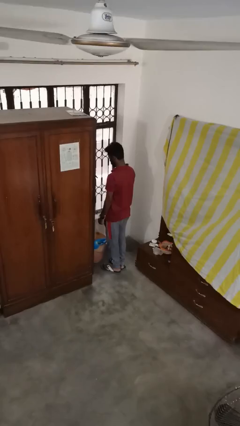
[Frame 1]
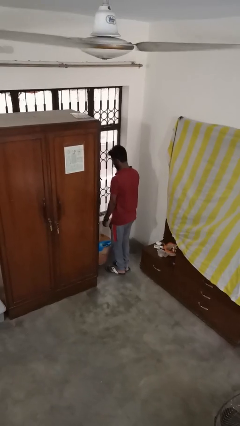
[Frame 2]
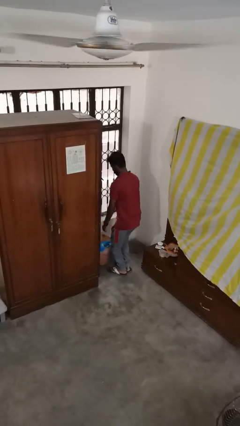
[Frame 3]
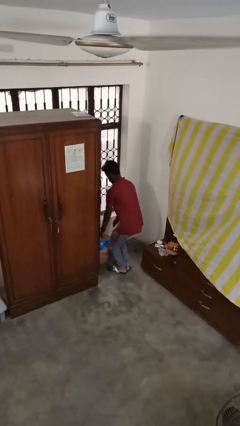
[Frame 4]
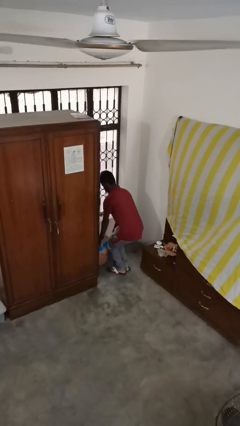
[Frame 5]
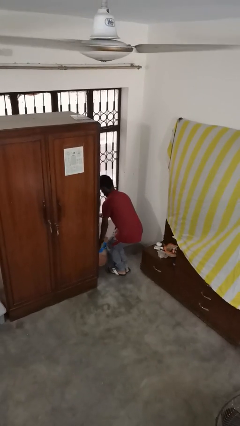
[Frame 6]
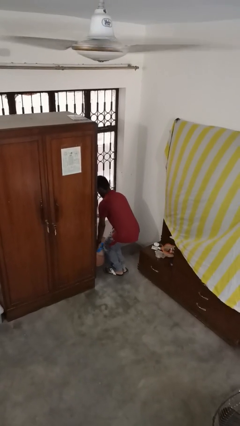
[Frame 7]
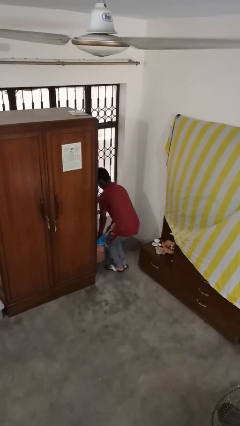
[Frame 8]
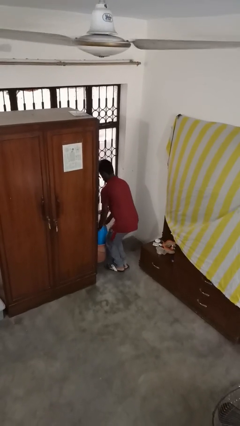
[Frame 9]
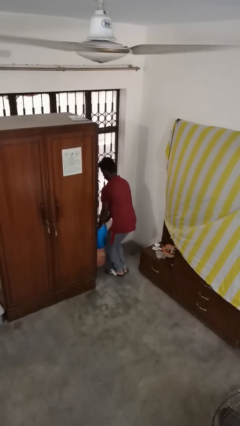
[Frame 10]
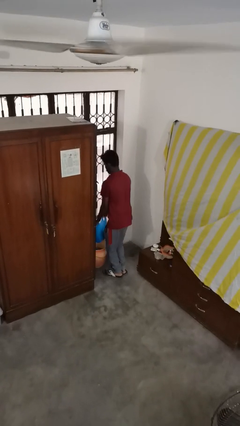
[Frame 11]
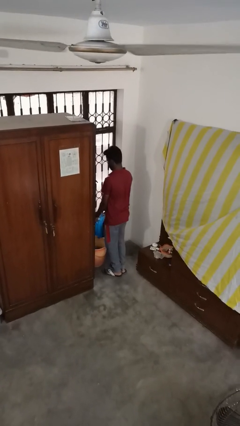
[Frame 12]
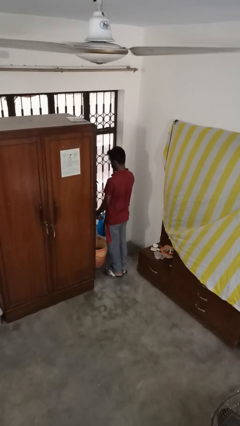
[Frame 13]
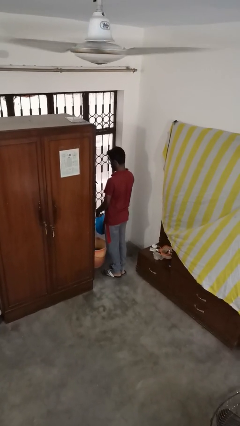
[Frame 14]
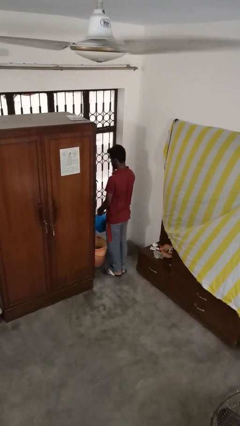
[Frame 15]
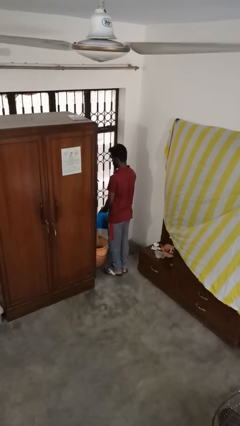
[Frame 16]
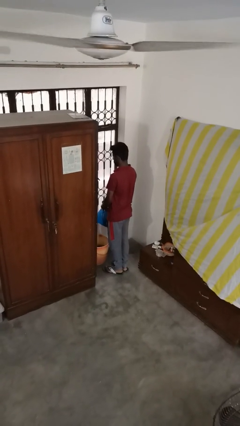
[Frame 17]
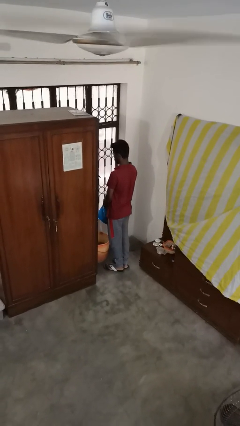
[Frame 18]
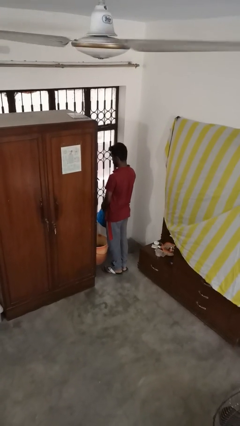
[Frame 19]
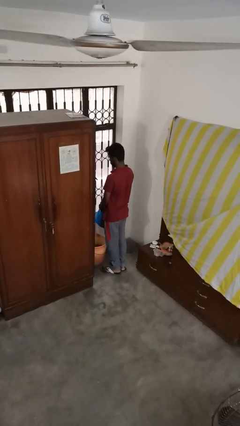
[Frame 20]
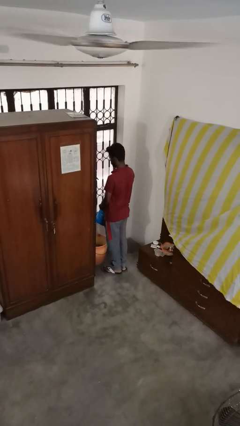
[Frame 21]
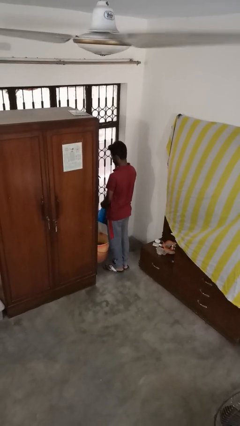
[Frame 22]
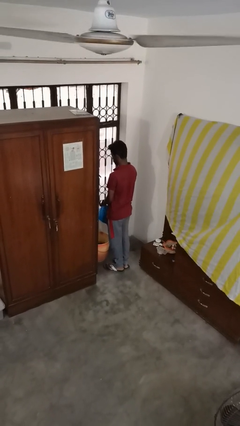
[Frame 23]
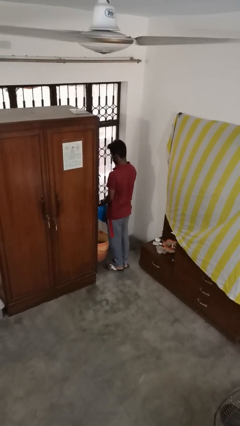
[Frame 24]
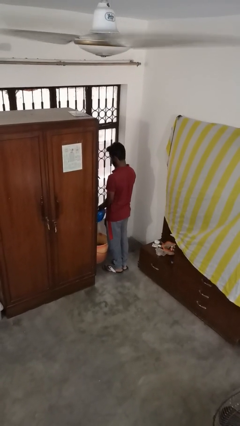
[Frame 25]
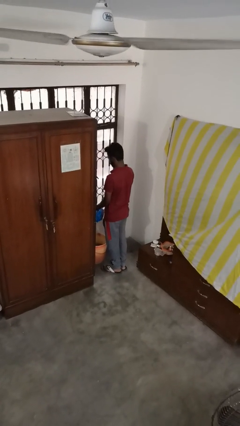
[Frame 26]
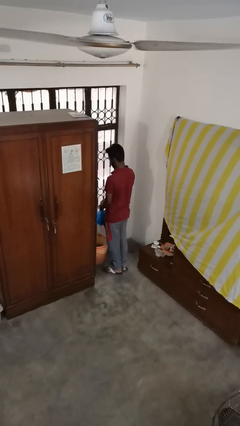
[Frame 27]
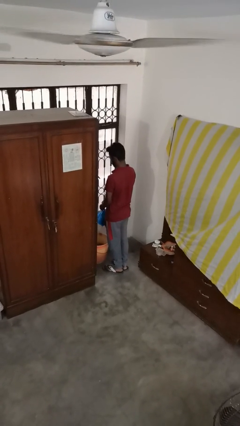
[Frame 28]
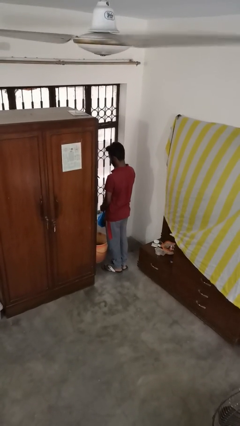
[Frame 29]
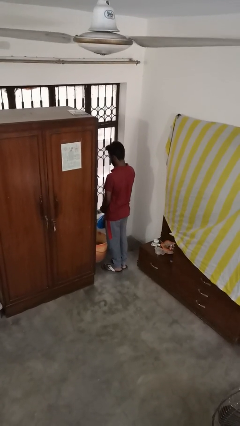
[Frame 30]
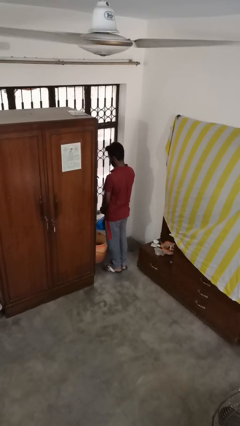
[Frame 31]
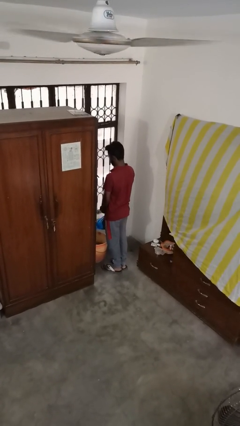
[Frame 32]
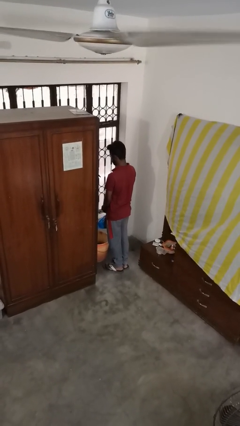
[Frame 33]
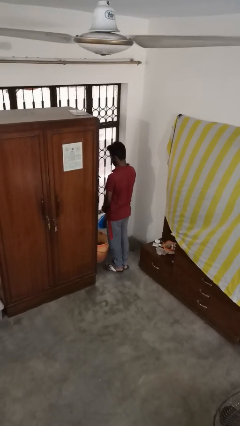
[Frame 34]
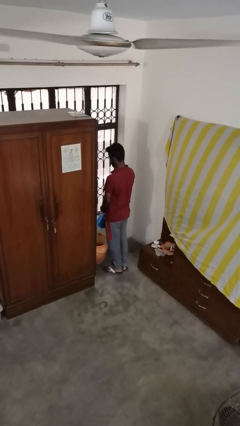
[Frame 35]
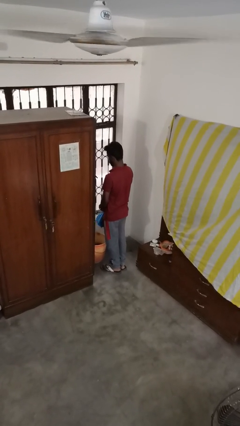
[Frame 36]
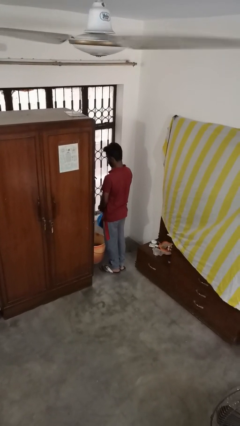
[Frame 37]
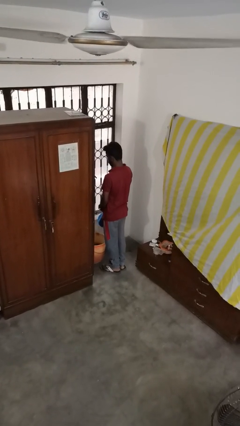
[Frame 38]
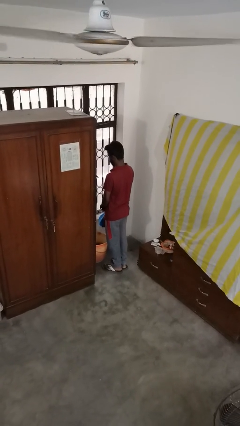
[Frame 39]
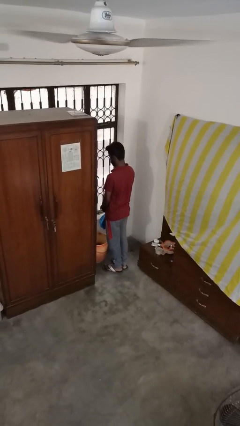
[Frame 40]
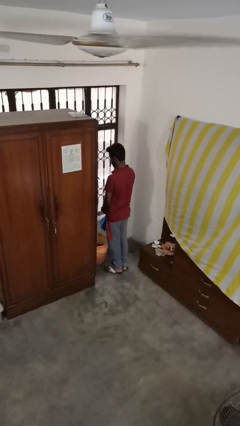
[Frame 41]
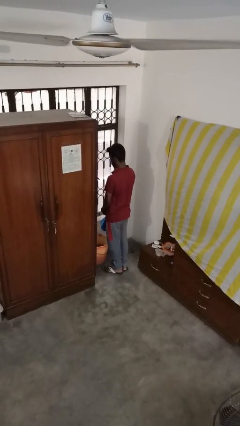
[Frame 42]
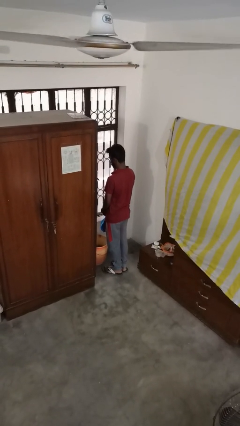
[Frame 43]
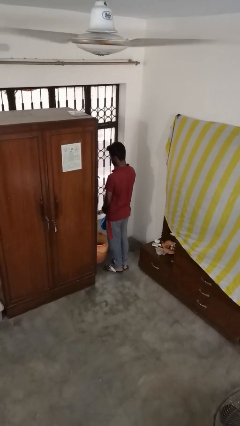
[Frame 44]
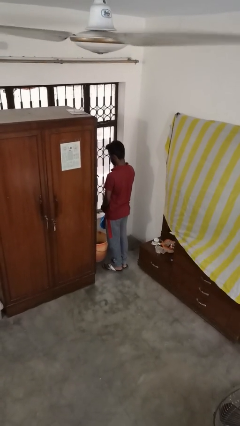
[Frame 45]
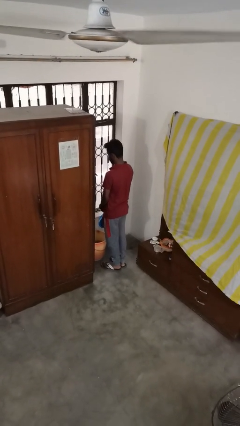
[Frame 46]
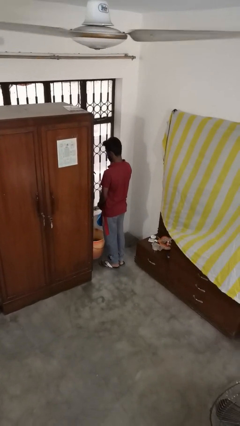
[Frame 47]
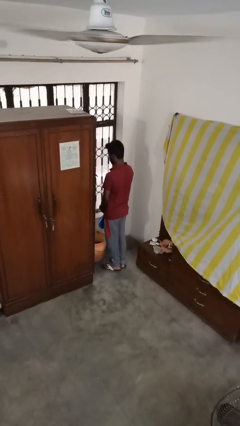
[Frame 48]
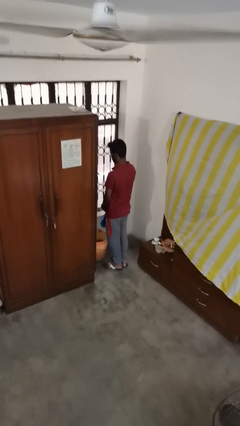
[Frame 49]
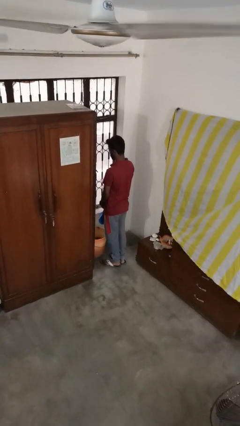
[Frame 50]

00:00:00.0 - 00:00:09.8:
person removes trashbag from trashcan

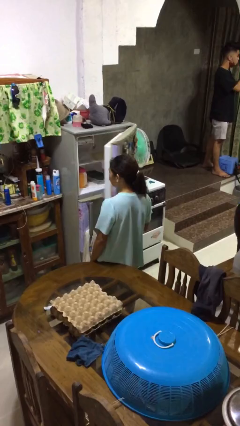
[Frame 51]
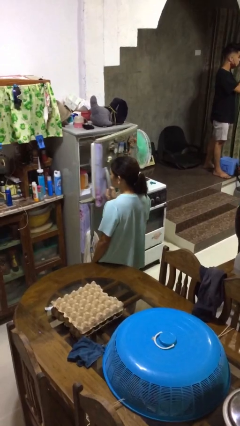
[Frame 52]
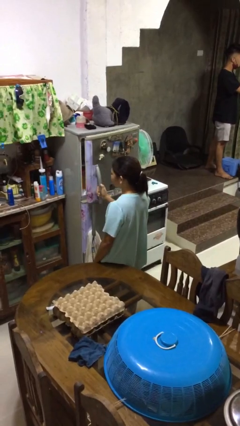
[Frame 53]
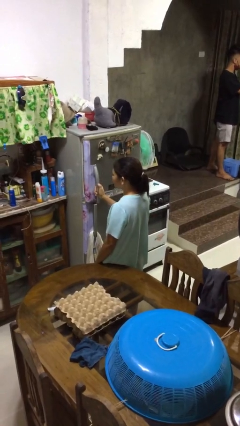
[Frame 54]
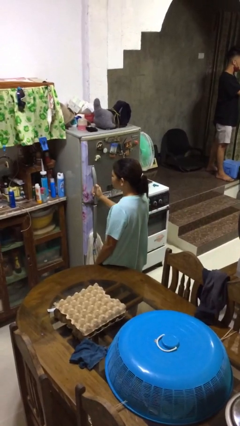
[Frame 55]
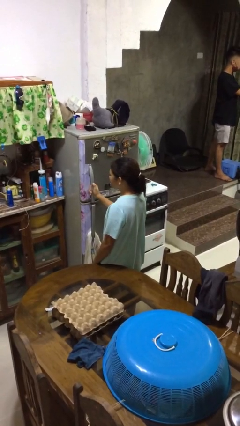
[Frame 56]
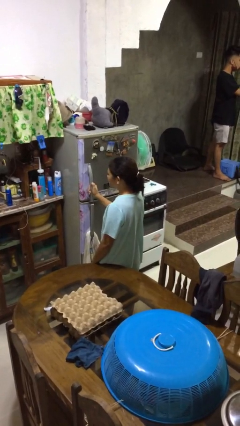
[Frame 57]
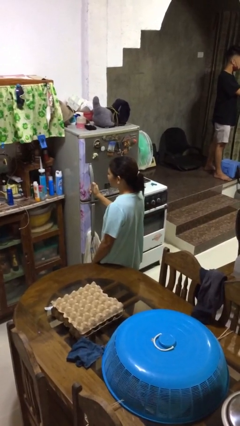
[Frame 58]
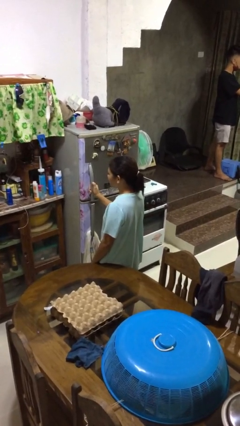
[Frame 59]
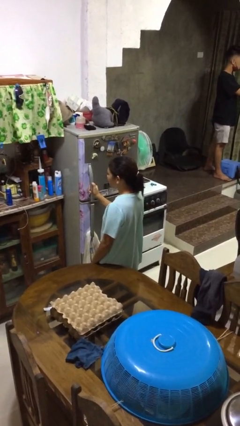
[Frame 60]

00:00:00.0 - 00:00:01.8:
person closes refrigerator

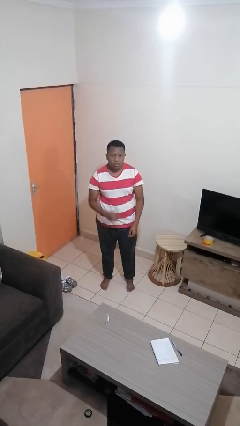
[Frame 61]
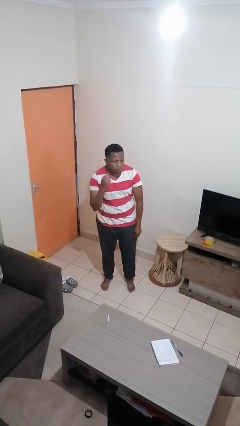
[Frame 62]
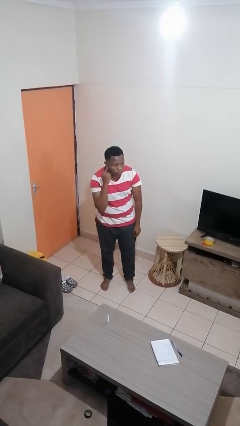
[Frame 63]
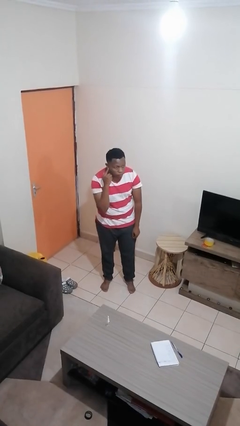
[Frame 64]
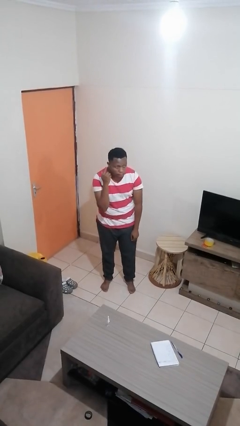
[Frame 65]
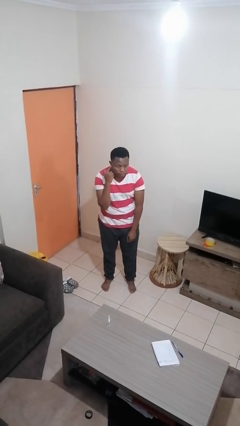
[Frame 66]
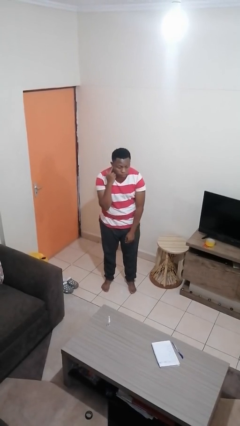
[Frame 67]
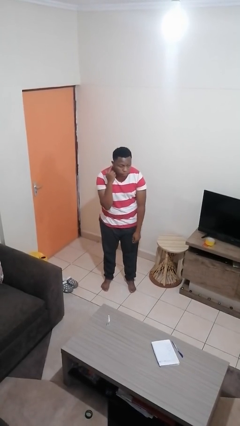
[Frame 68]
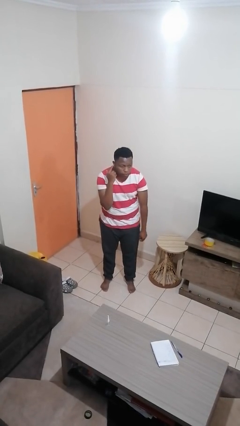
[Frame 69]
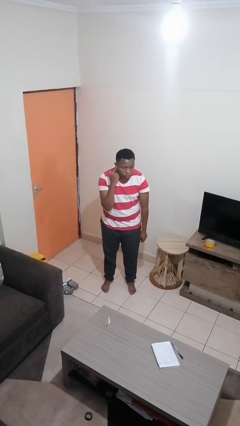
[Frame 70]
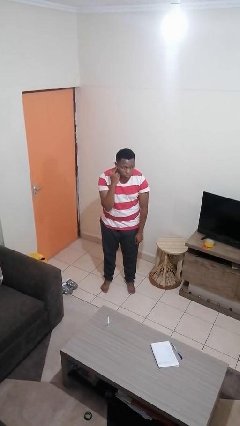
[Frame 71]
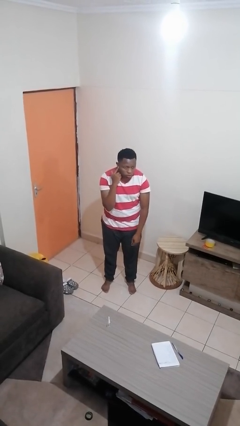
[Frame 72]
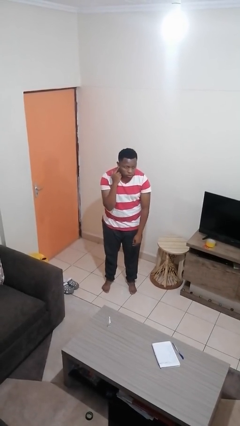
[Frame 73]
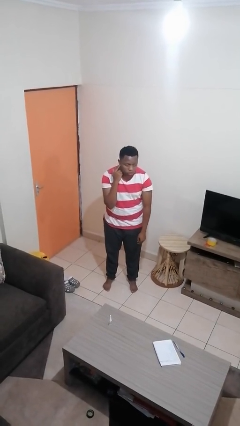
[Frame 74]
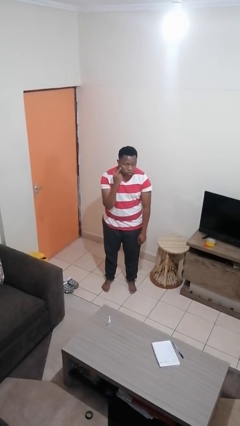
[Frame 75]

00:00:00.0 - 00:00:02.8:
person gestures listen closely

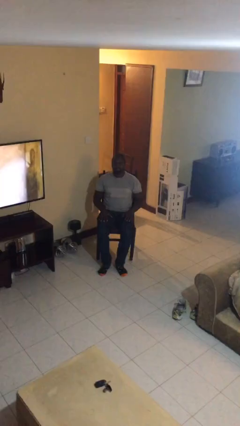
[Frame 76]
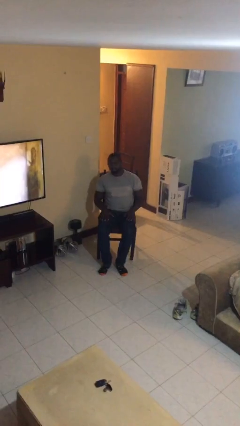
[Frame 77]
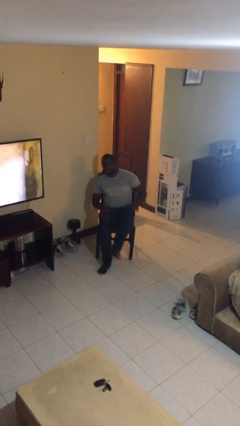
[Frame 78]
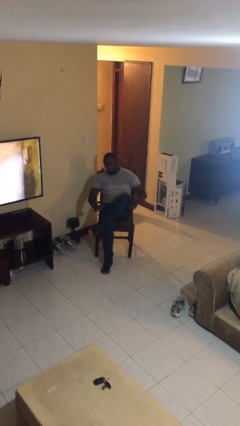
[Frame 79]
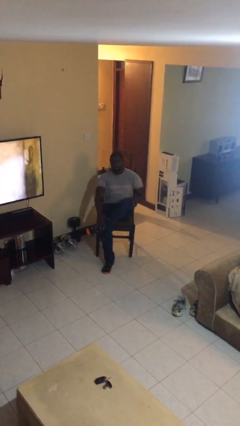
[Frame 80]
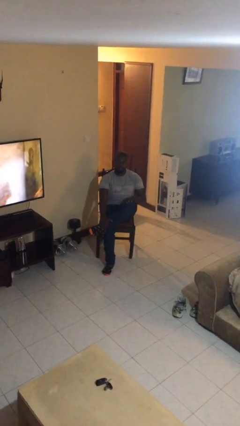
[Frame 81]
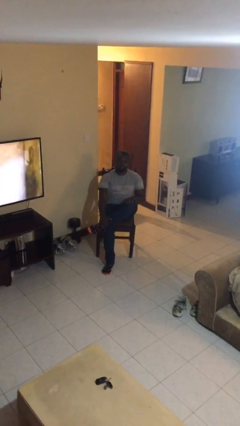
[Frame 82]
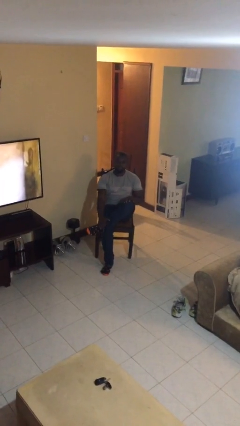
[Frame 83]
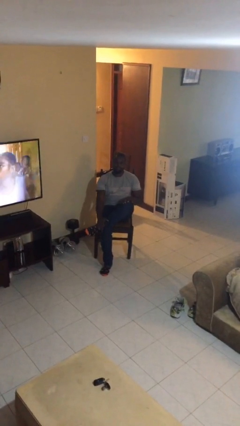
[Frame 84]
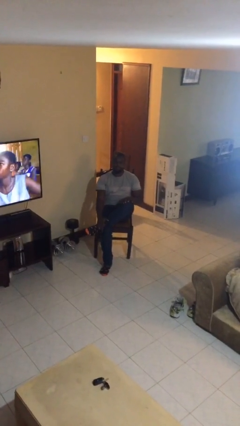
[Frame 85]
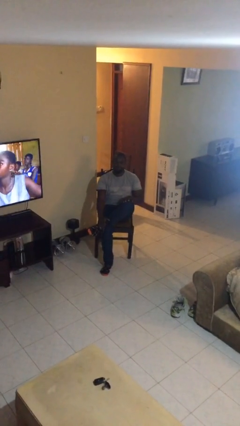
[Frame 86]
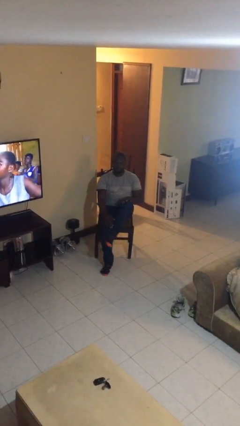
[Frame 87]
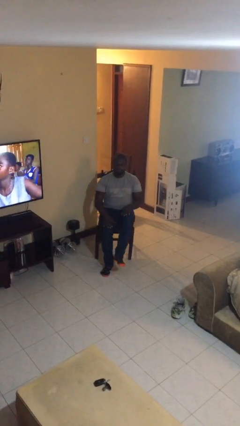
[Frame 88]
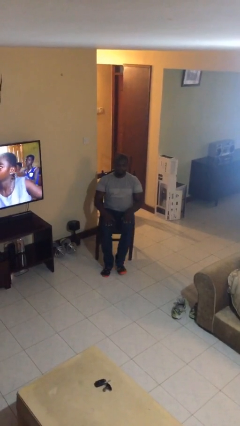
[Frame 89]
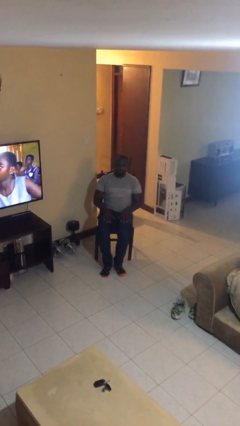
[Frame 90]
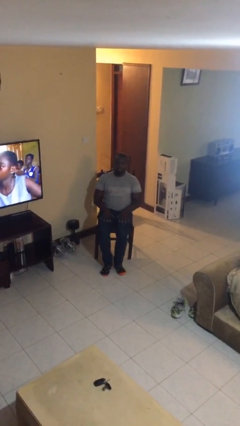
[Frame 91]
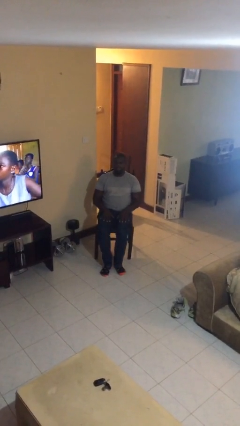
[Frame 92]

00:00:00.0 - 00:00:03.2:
person crosses legs

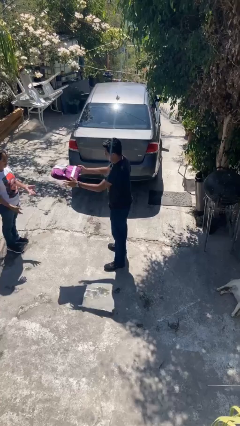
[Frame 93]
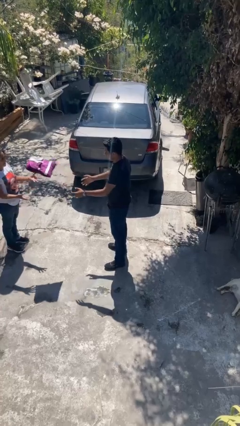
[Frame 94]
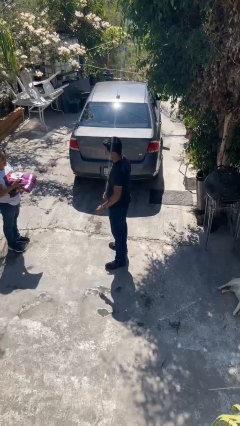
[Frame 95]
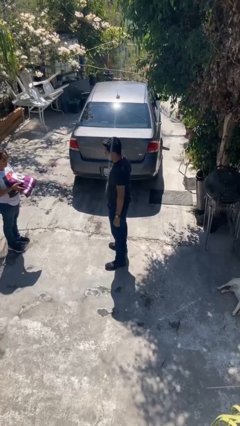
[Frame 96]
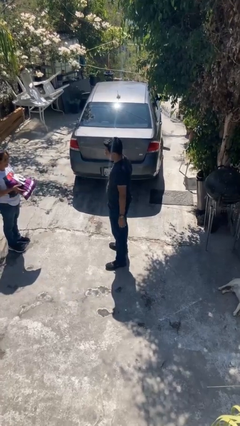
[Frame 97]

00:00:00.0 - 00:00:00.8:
person throws object to person
